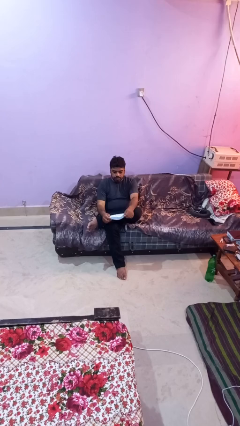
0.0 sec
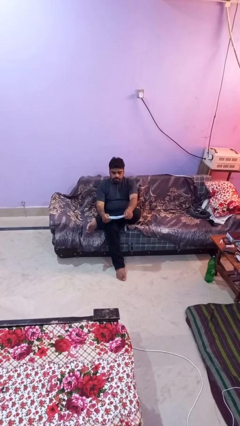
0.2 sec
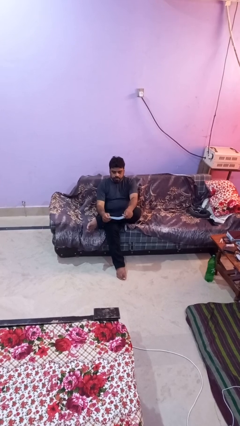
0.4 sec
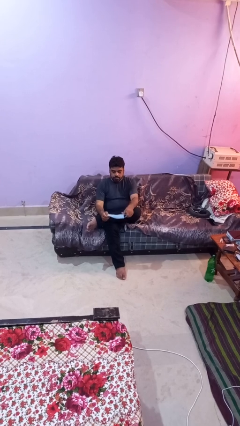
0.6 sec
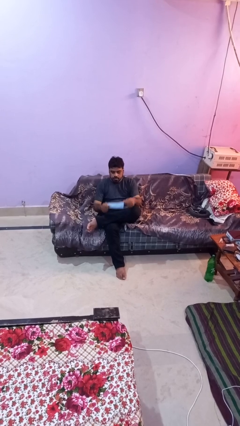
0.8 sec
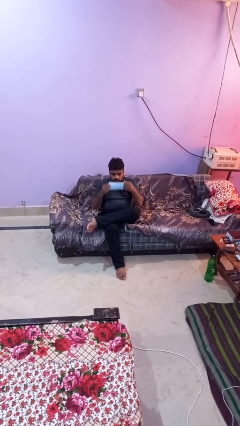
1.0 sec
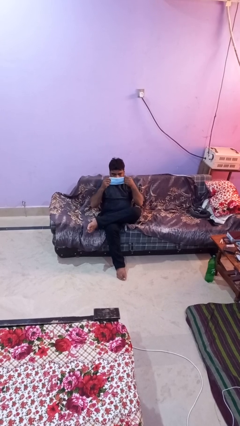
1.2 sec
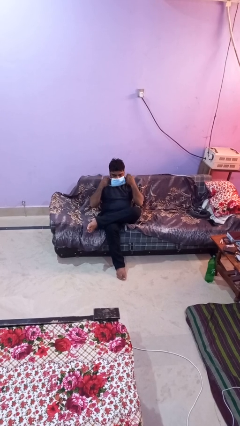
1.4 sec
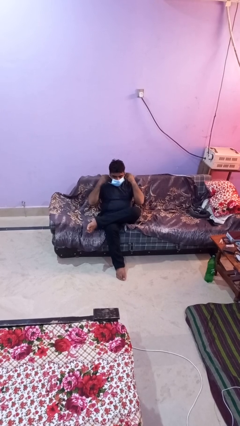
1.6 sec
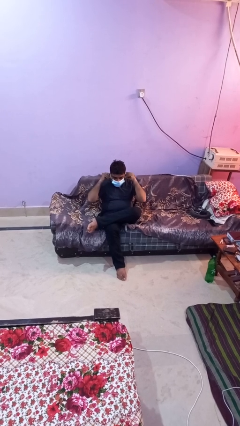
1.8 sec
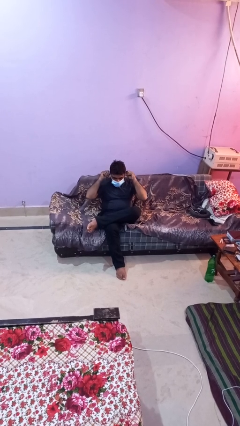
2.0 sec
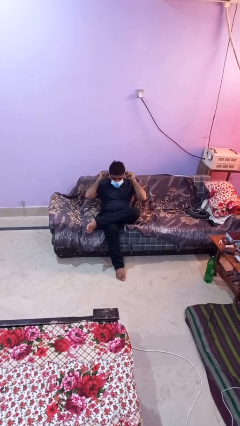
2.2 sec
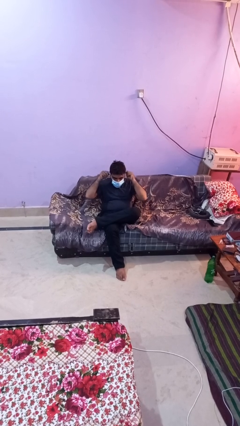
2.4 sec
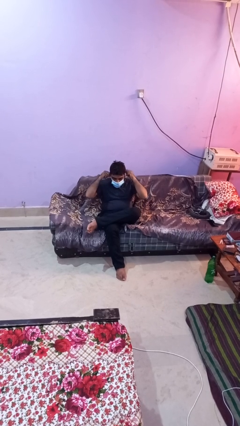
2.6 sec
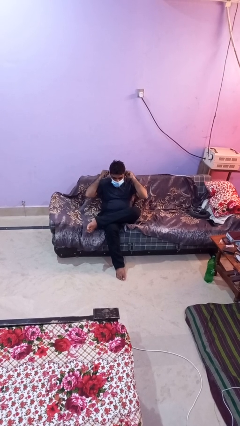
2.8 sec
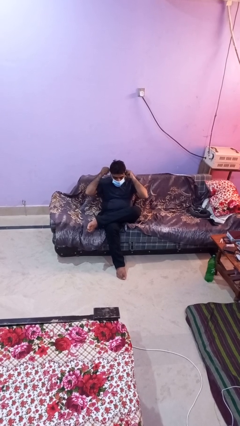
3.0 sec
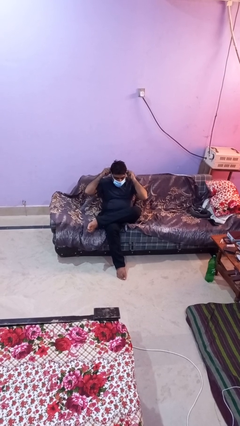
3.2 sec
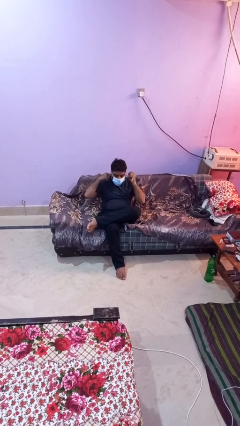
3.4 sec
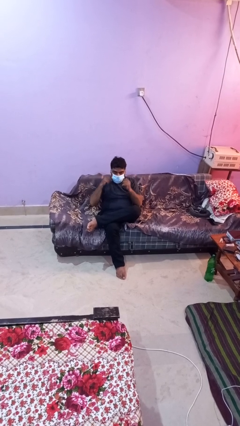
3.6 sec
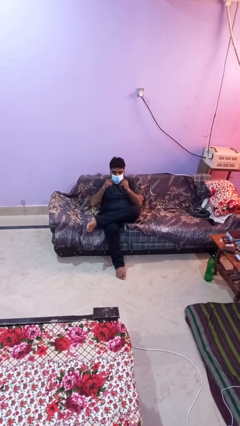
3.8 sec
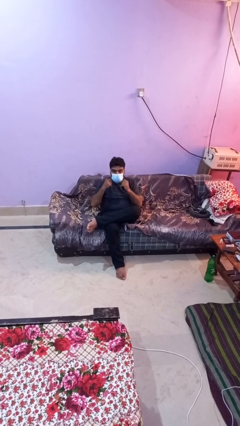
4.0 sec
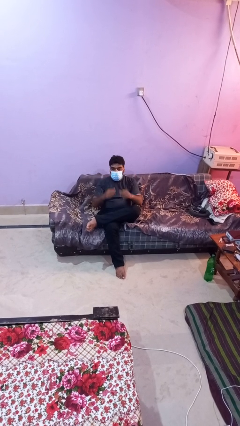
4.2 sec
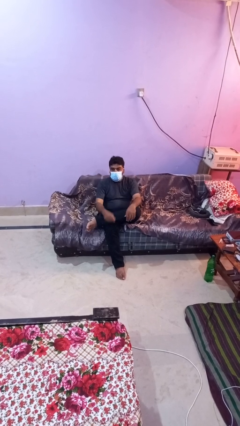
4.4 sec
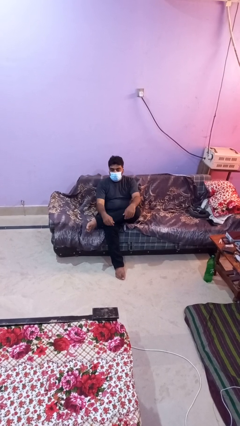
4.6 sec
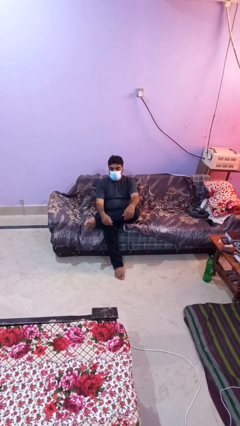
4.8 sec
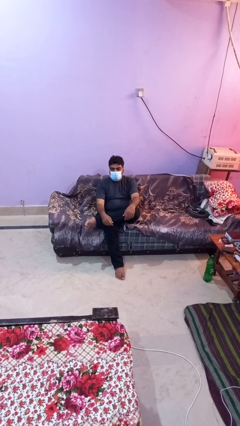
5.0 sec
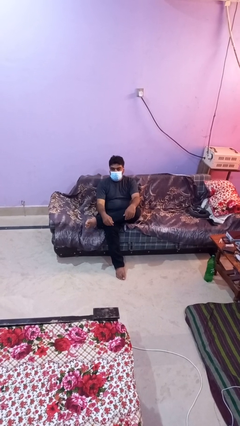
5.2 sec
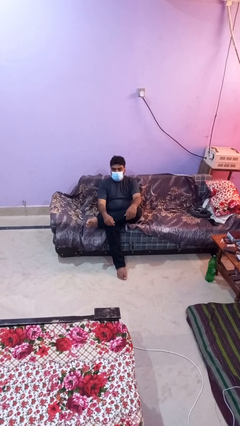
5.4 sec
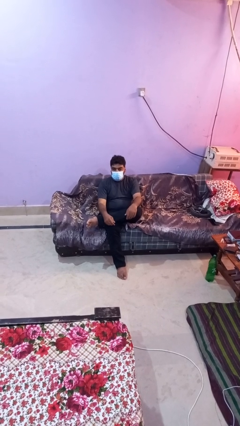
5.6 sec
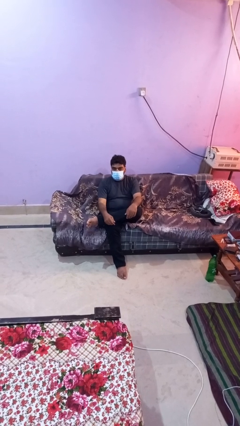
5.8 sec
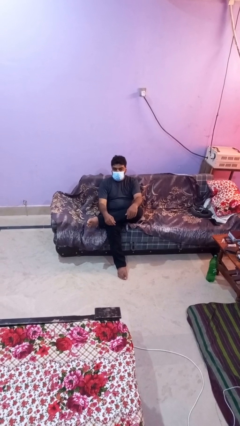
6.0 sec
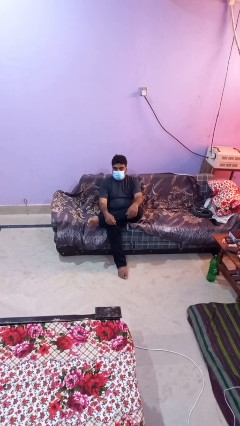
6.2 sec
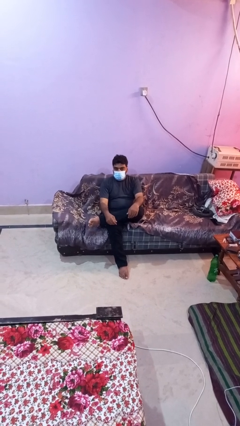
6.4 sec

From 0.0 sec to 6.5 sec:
person puts on facemask

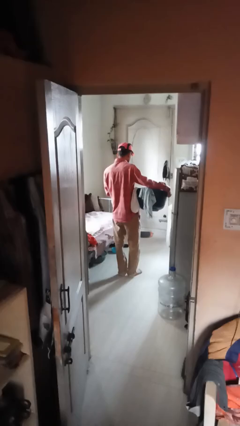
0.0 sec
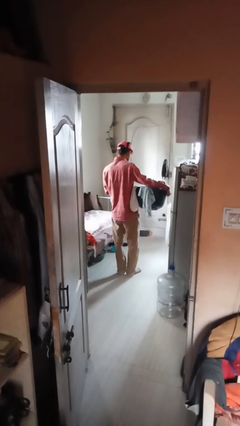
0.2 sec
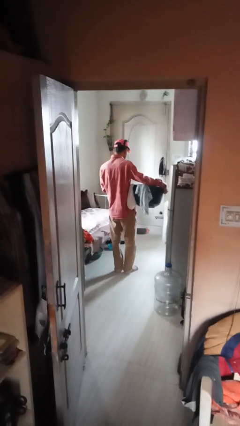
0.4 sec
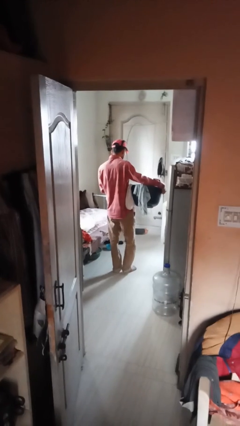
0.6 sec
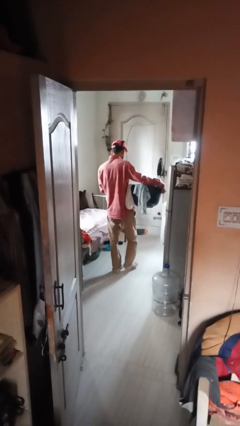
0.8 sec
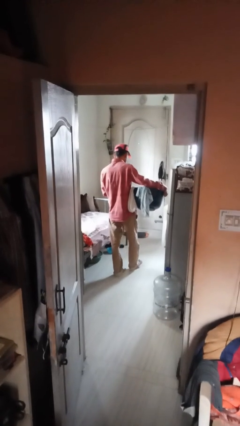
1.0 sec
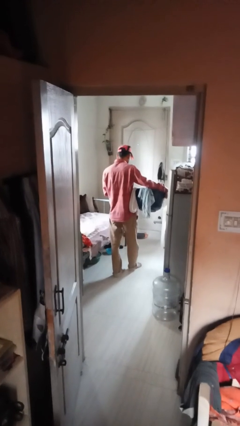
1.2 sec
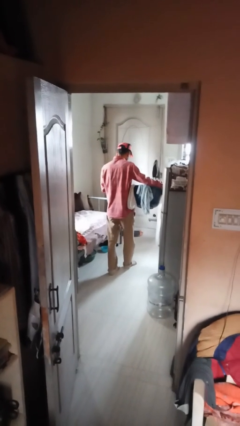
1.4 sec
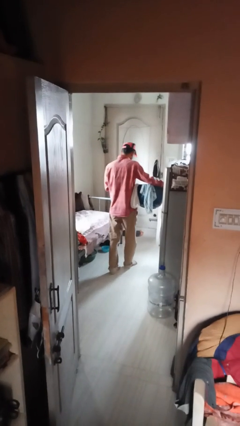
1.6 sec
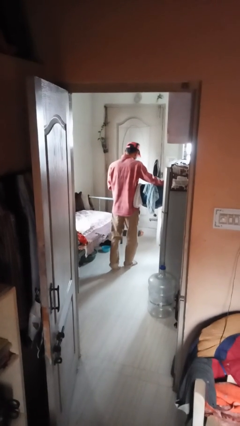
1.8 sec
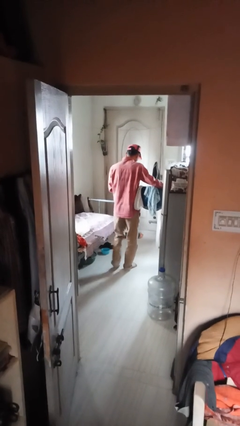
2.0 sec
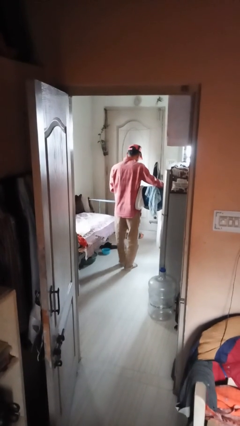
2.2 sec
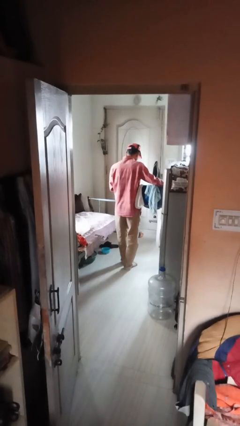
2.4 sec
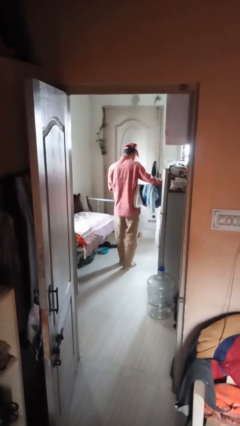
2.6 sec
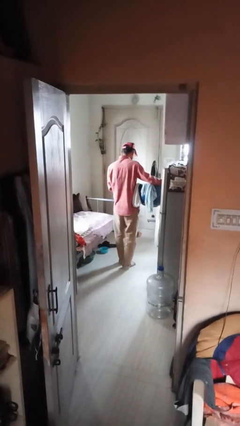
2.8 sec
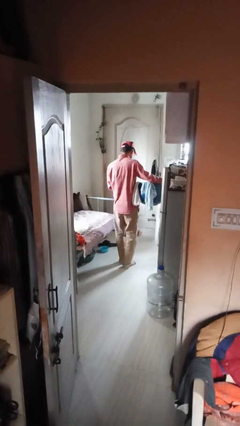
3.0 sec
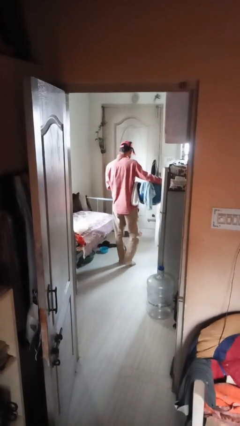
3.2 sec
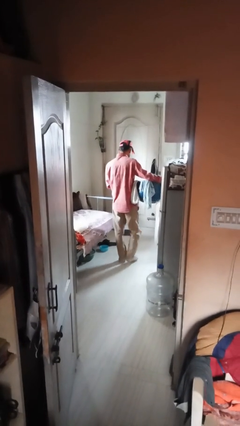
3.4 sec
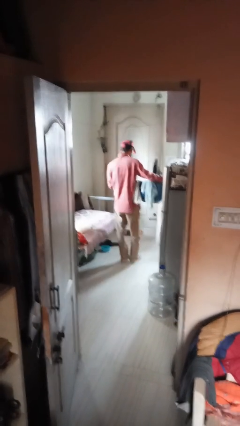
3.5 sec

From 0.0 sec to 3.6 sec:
person carries furniture

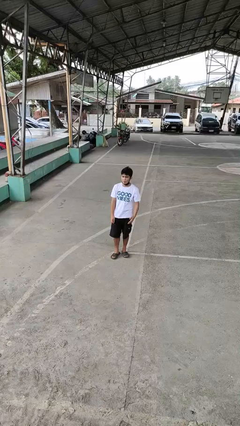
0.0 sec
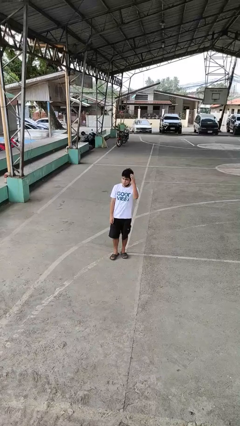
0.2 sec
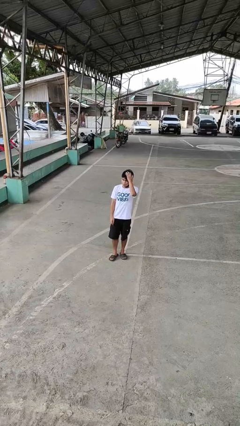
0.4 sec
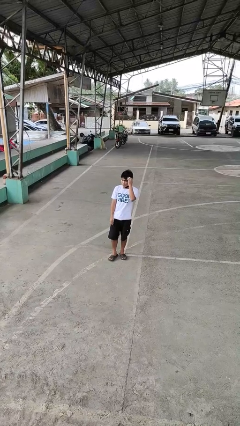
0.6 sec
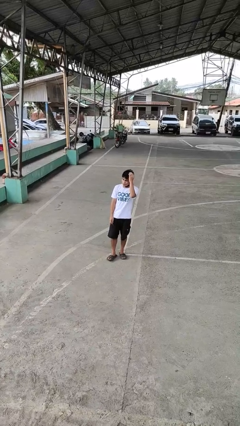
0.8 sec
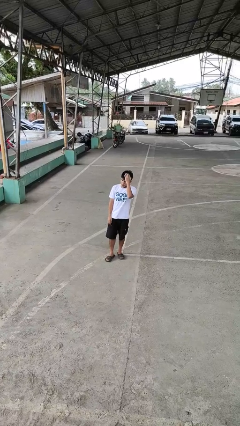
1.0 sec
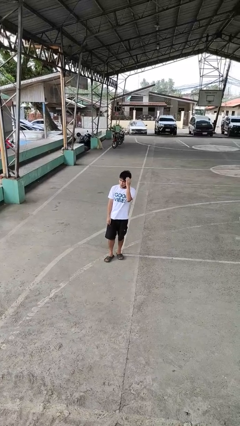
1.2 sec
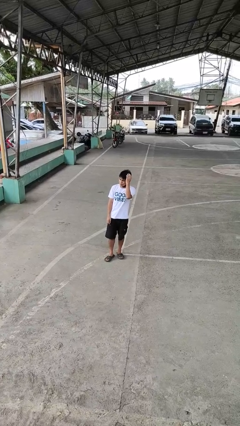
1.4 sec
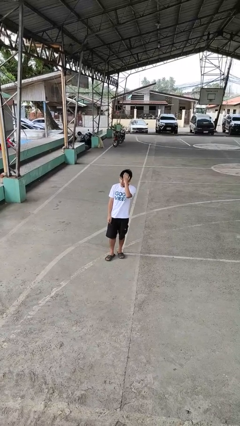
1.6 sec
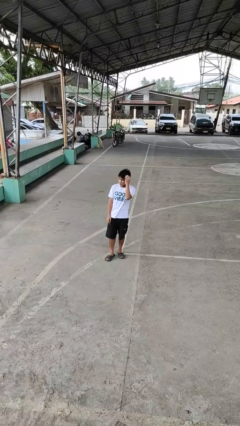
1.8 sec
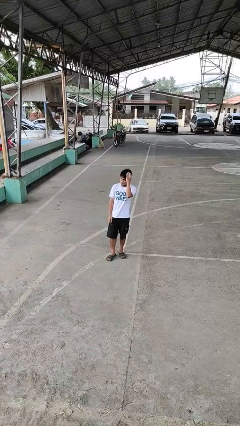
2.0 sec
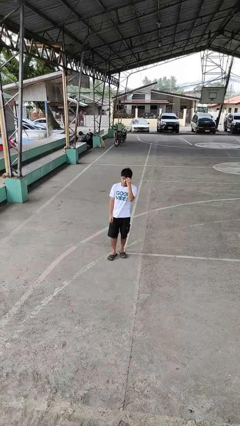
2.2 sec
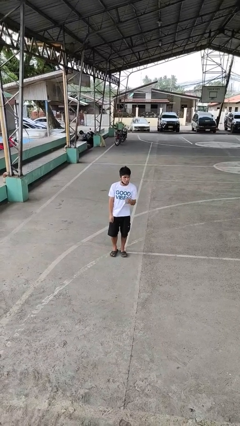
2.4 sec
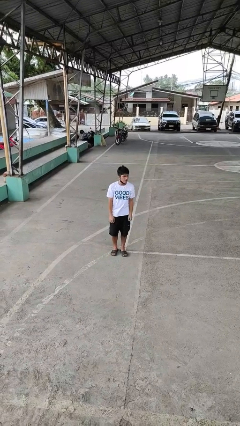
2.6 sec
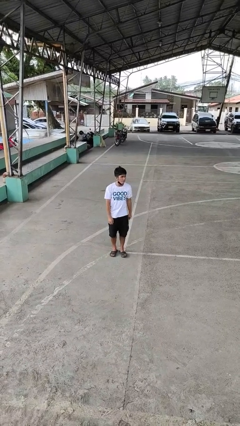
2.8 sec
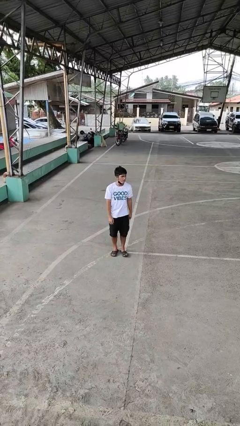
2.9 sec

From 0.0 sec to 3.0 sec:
person pats head

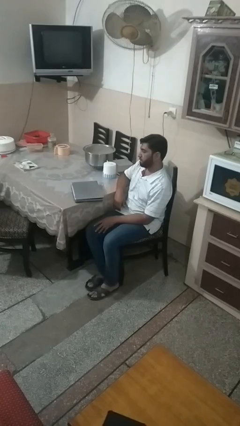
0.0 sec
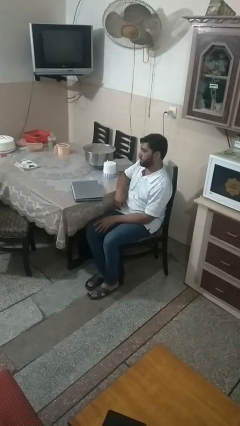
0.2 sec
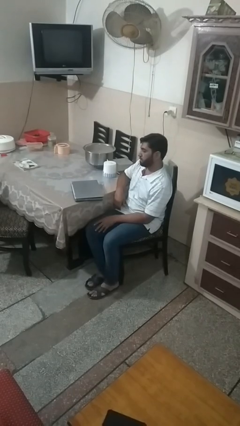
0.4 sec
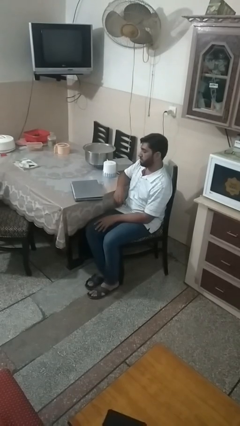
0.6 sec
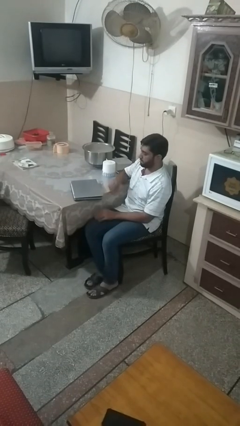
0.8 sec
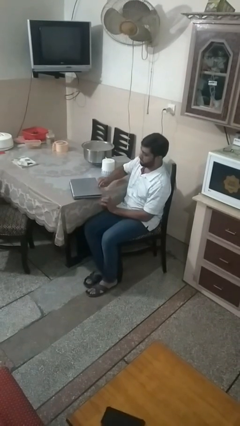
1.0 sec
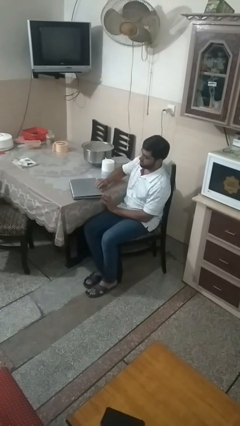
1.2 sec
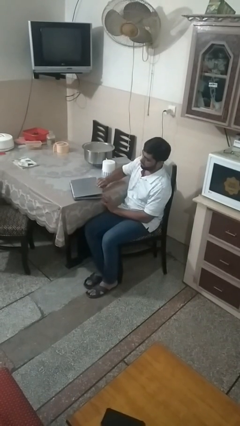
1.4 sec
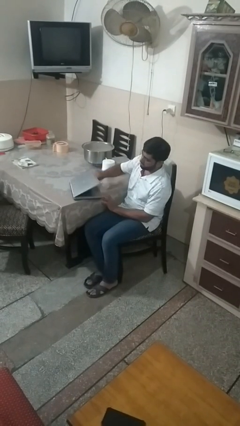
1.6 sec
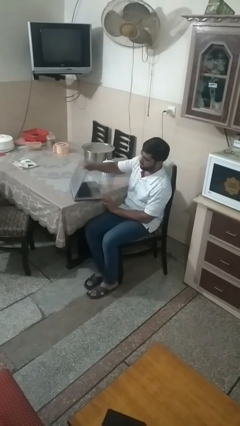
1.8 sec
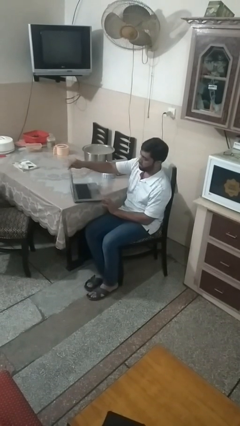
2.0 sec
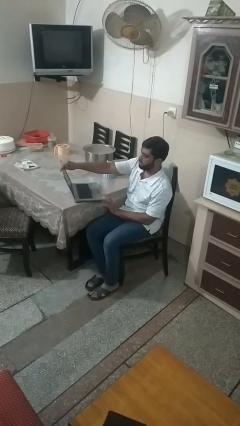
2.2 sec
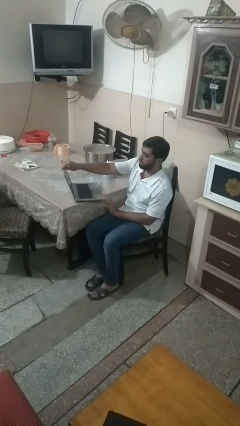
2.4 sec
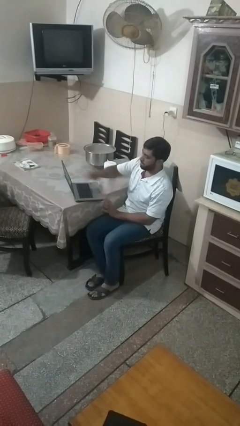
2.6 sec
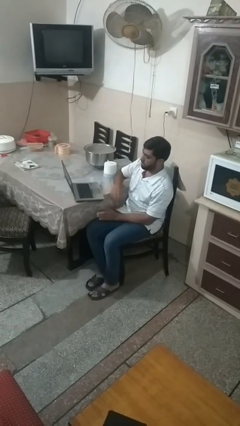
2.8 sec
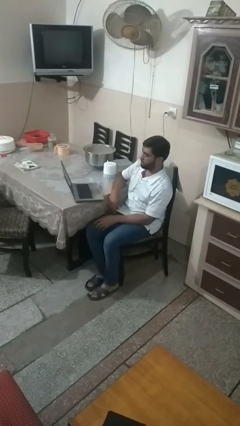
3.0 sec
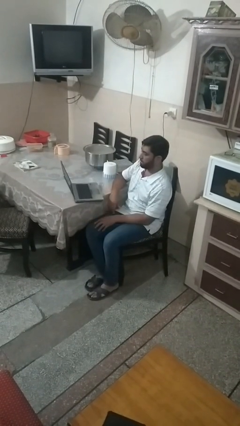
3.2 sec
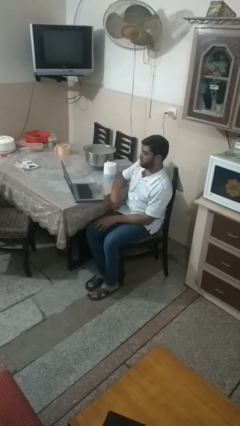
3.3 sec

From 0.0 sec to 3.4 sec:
person opens laptop

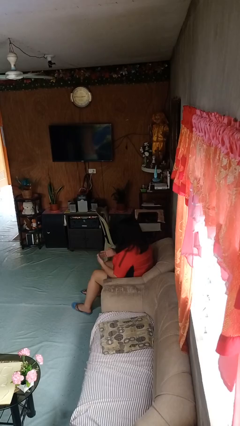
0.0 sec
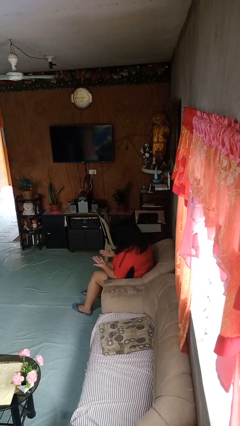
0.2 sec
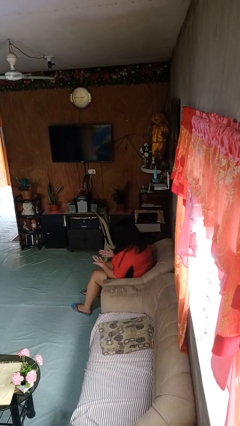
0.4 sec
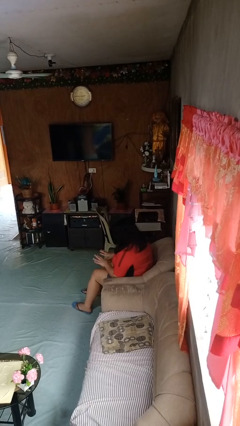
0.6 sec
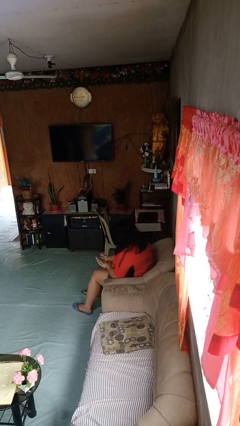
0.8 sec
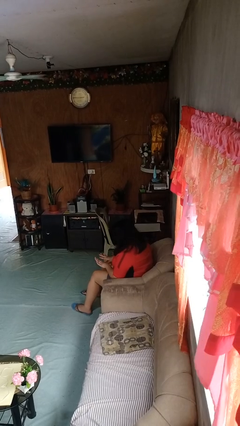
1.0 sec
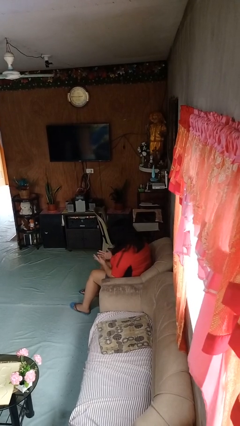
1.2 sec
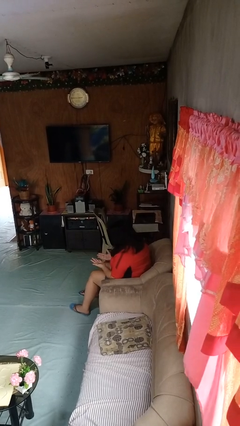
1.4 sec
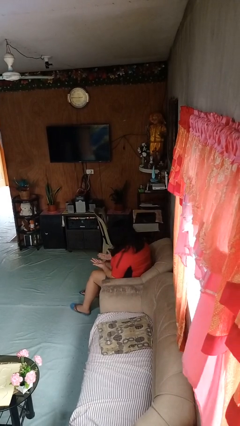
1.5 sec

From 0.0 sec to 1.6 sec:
person looks at hands in lap
